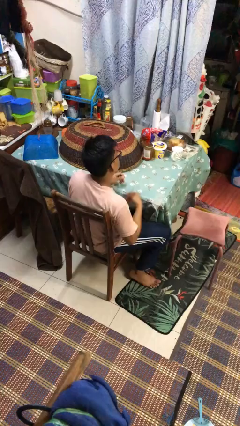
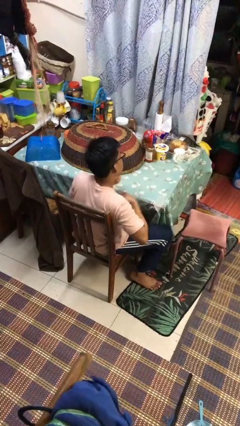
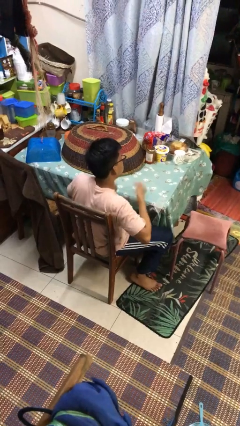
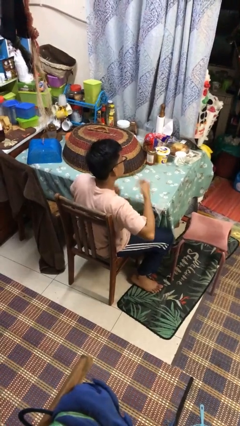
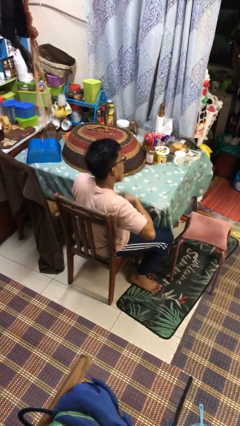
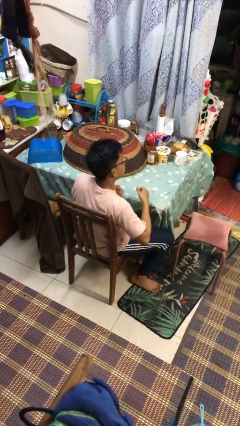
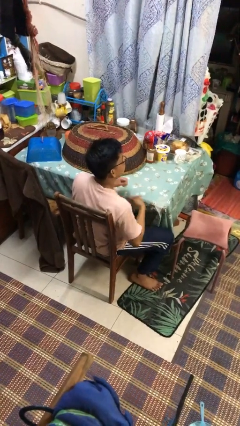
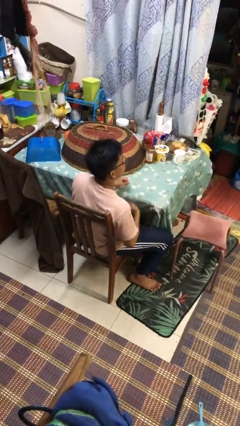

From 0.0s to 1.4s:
person drums on chest

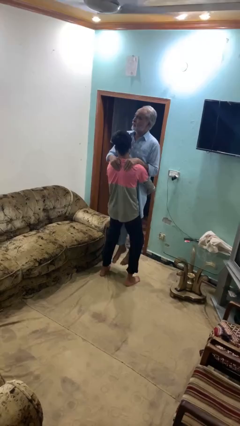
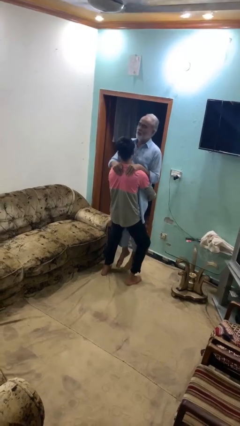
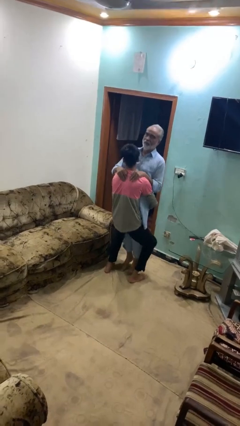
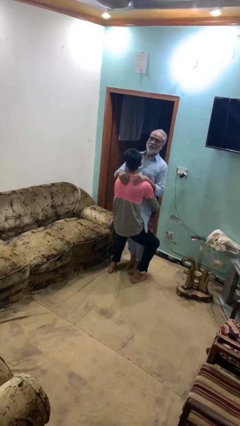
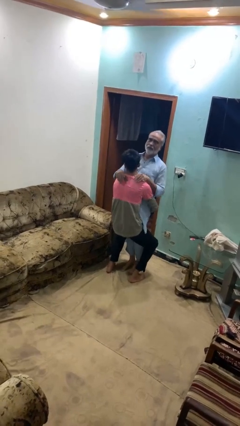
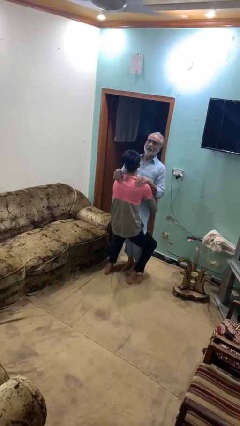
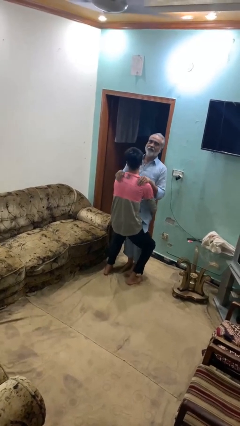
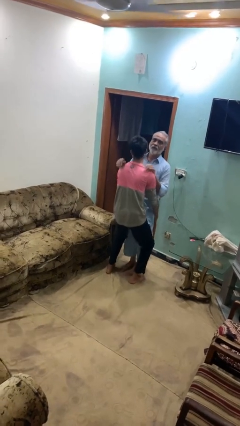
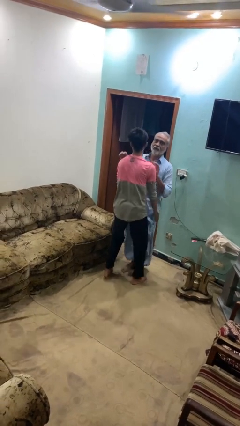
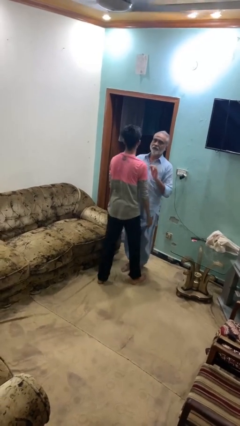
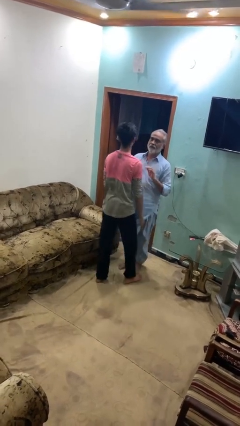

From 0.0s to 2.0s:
person puts down person

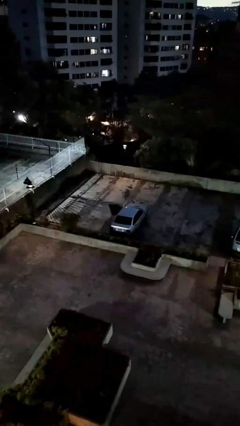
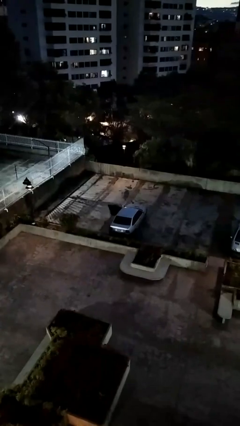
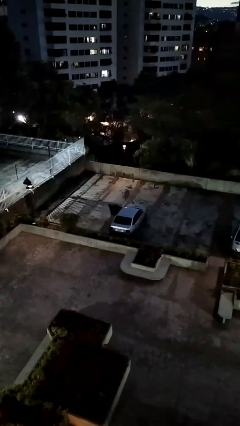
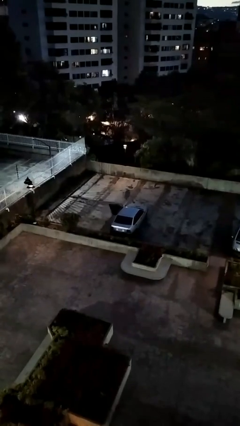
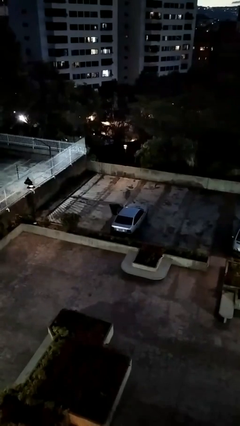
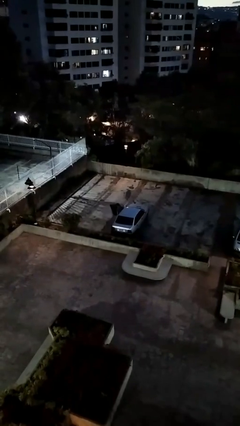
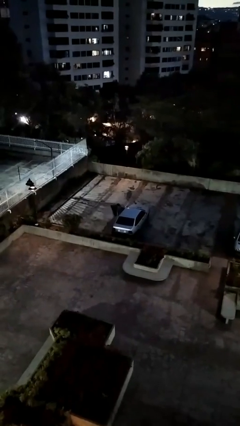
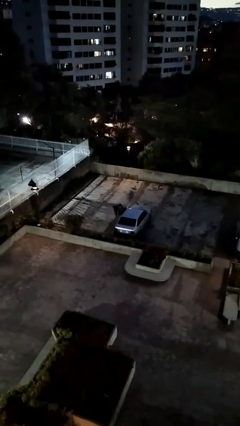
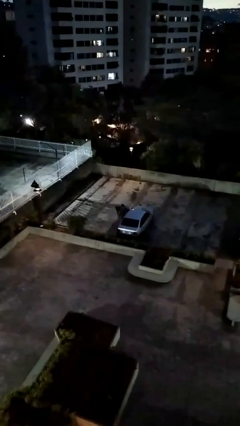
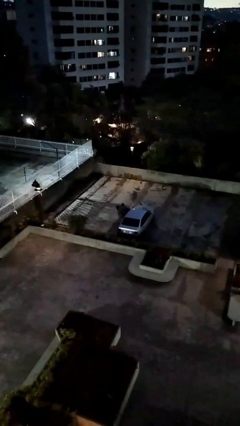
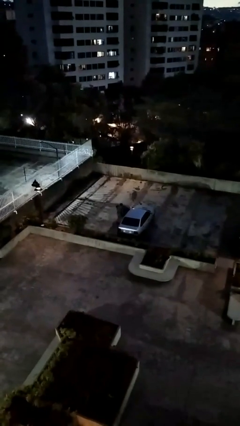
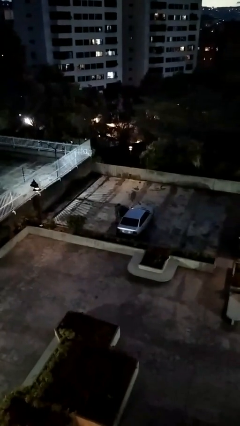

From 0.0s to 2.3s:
person exits car

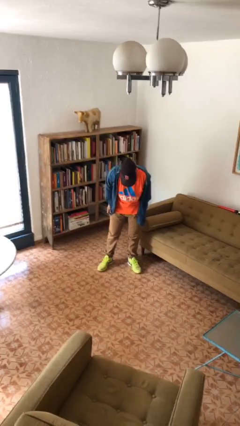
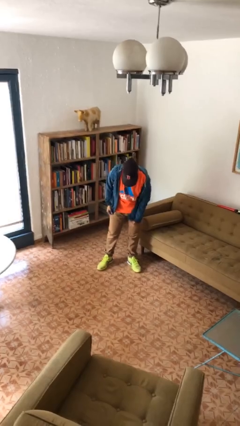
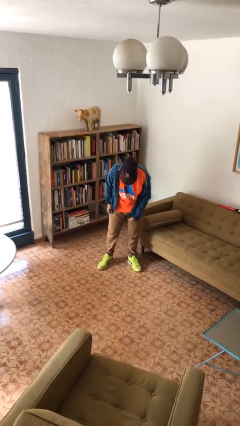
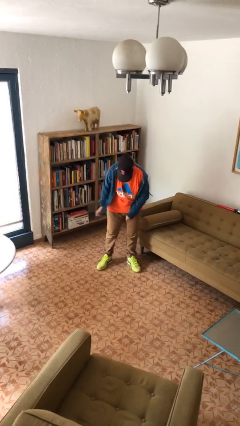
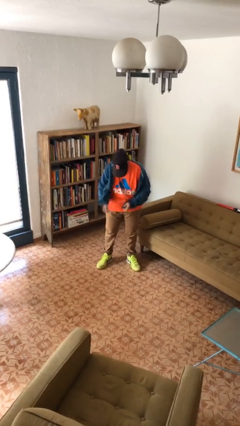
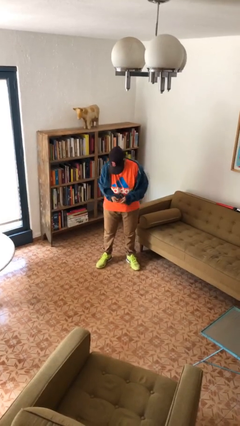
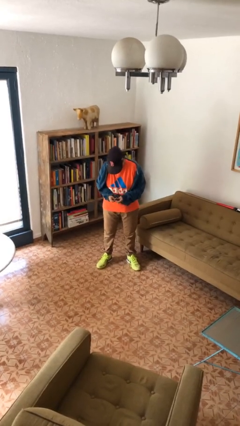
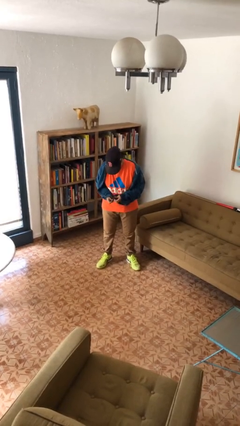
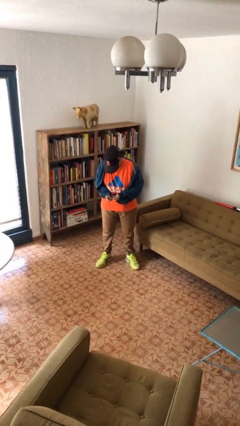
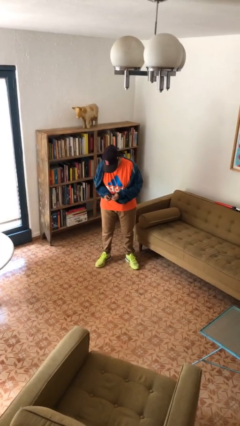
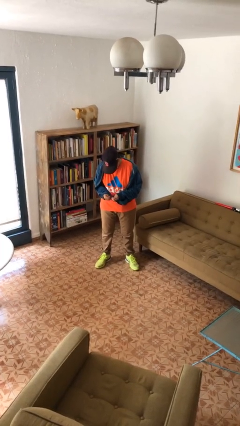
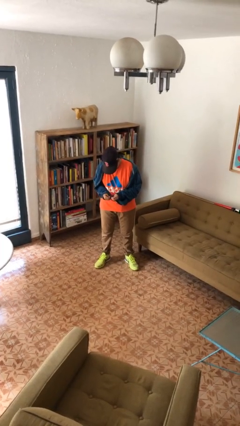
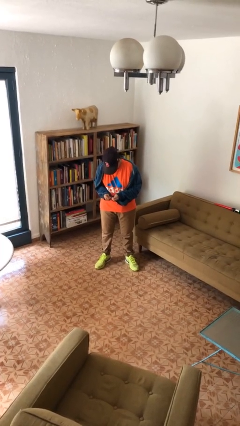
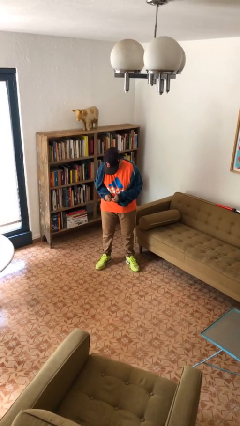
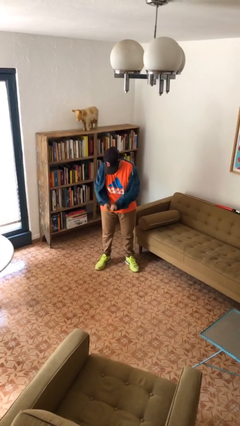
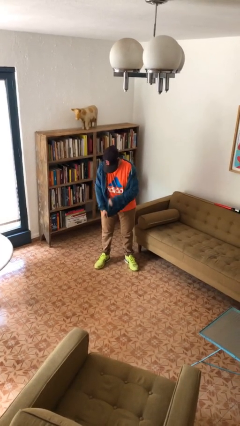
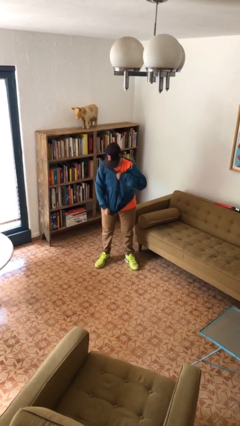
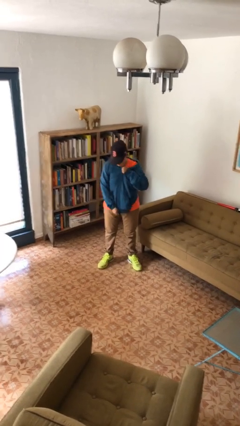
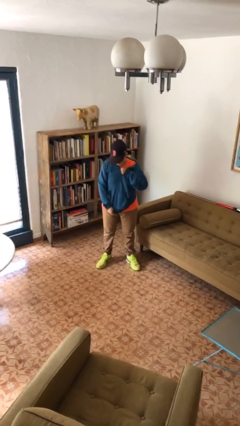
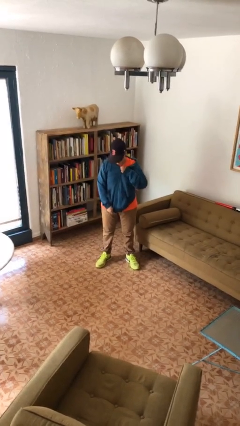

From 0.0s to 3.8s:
person zips up jacket

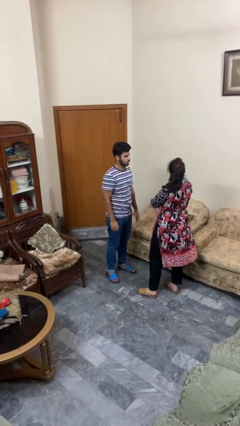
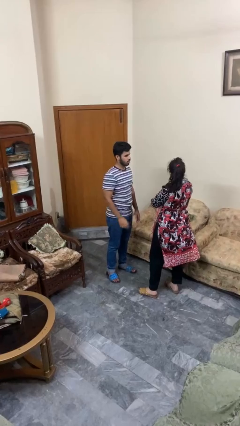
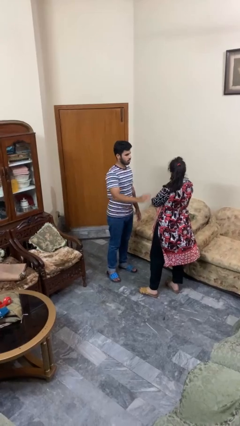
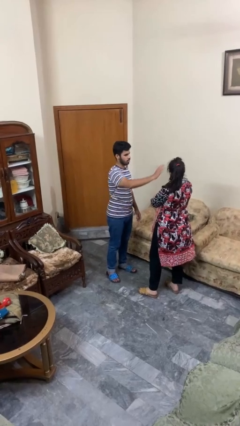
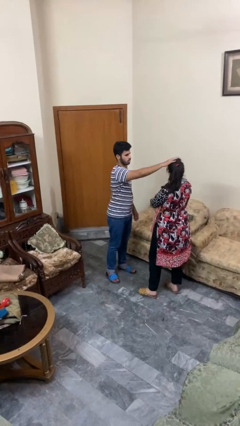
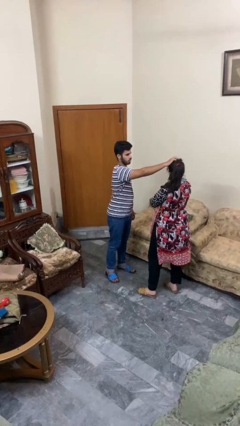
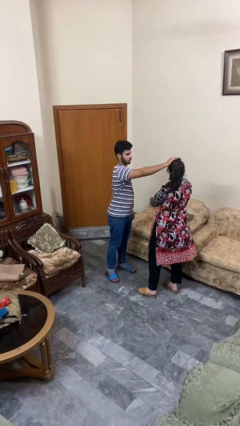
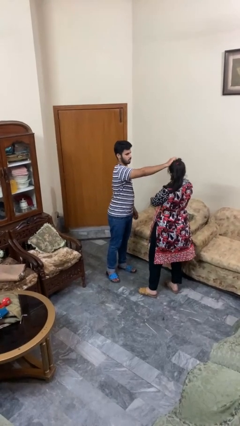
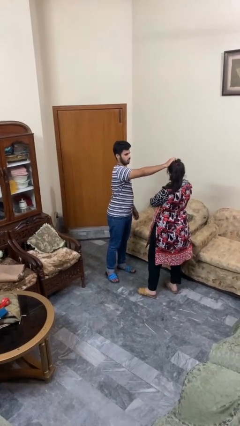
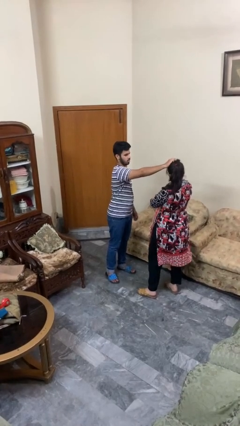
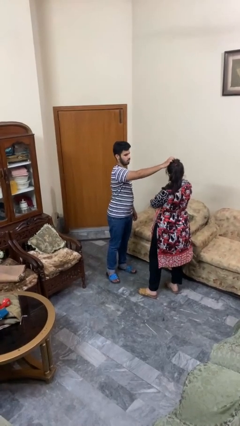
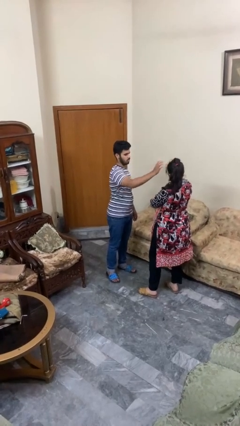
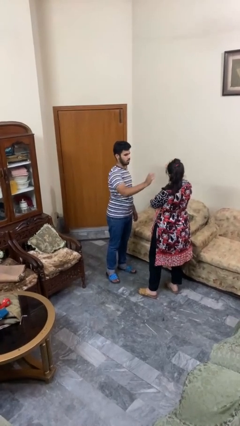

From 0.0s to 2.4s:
person grabs person by hair

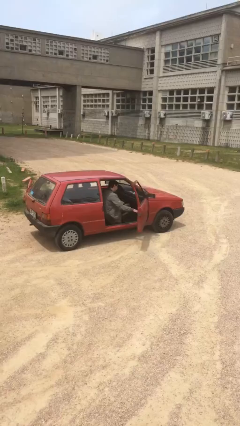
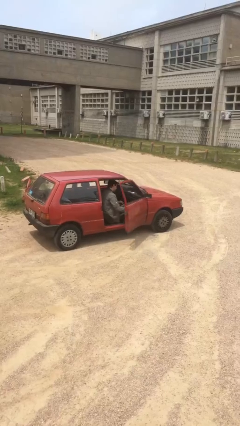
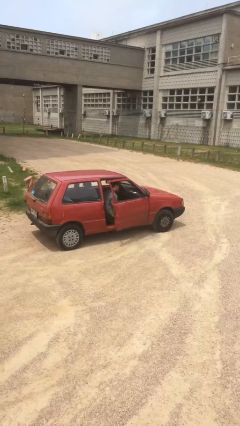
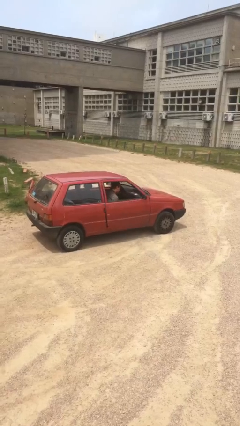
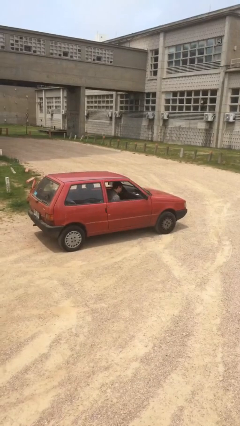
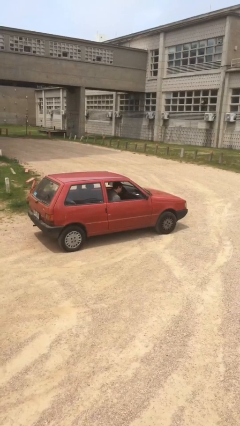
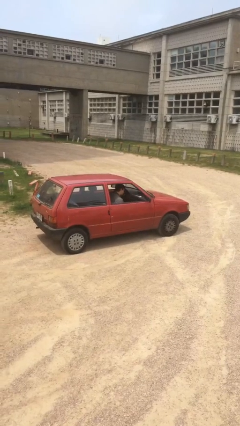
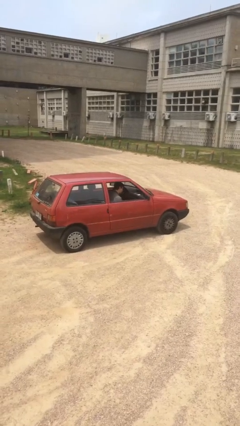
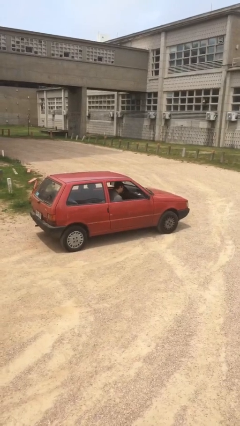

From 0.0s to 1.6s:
person closes car door

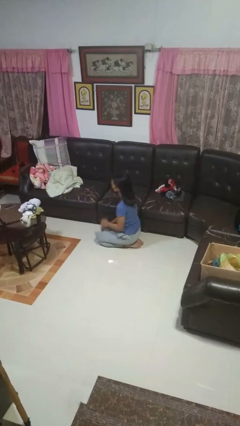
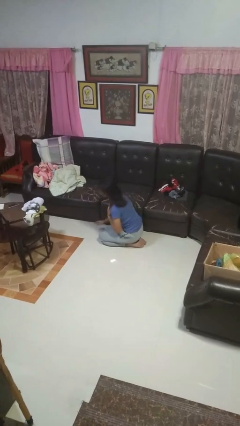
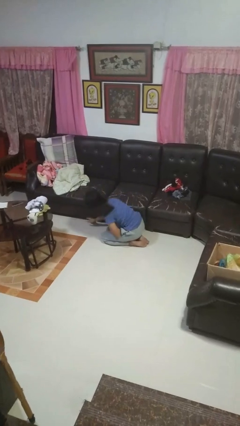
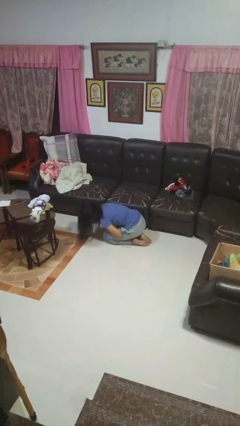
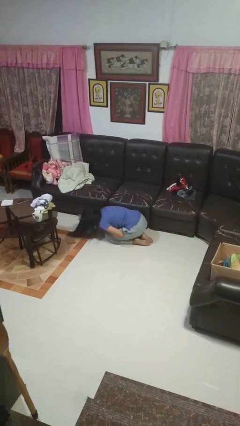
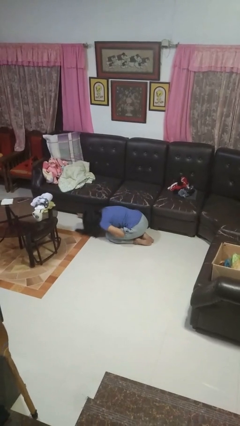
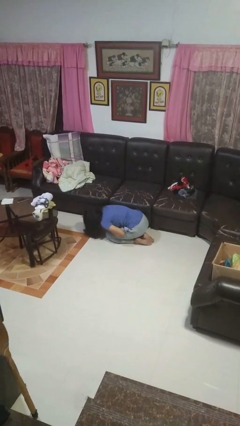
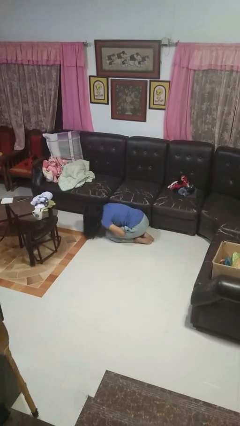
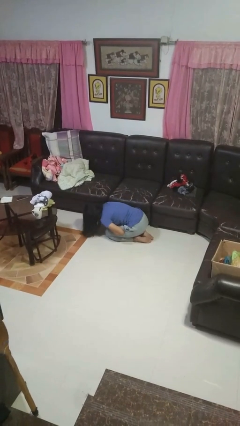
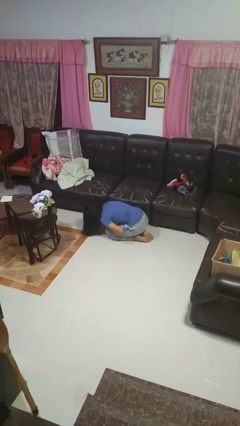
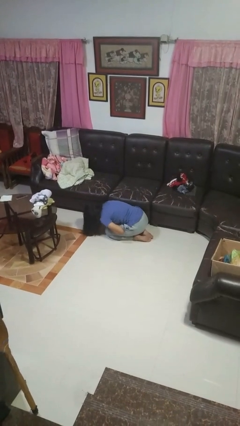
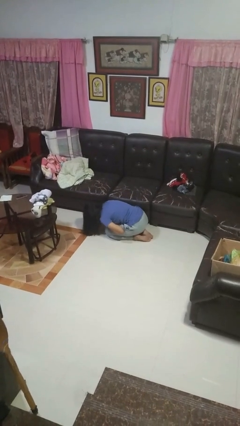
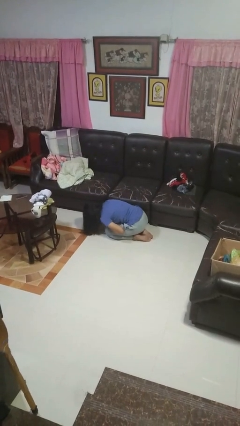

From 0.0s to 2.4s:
person searches under couch

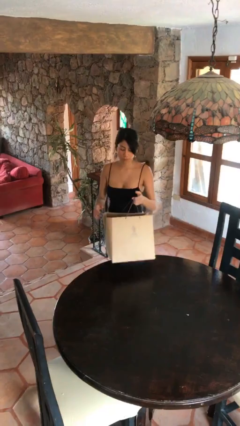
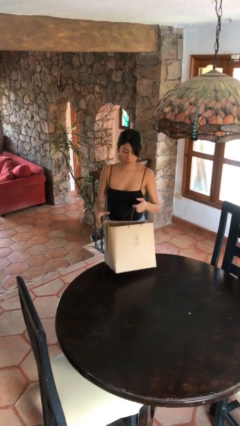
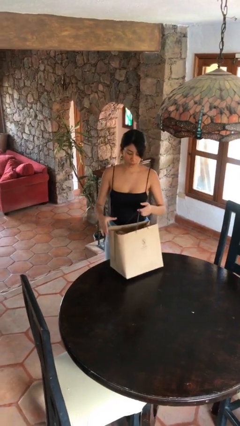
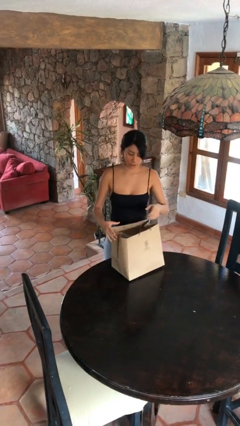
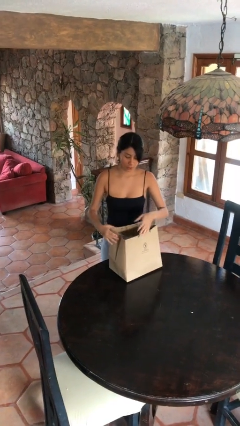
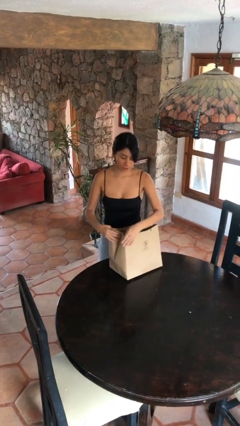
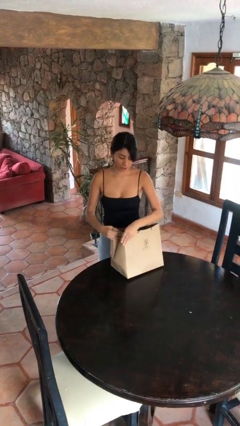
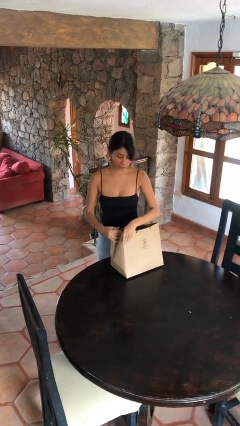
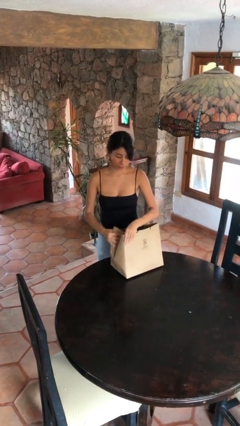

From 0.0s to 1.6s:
person puts down object on table
